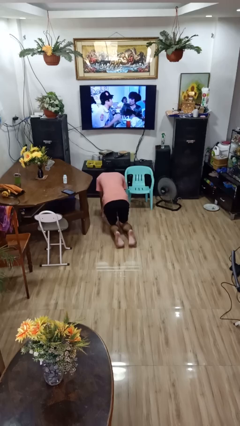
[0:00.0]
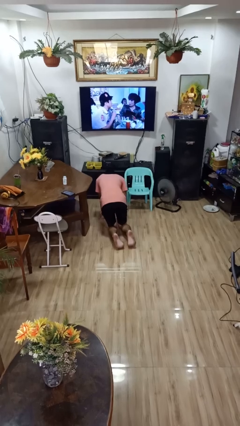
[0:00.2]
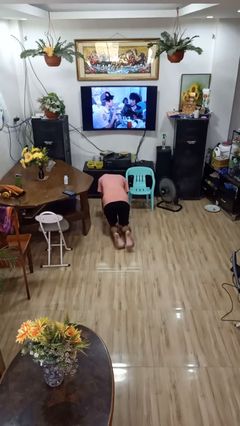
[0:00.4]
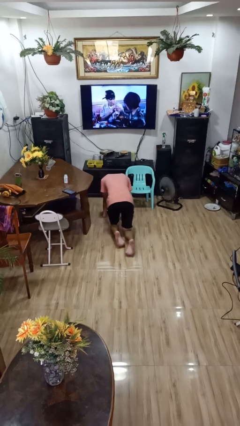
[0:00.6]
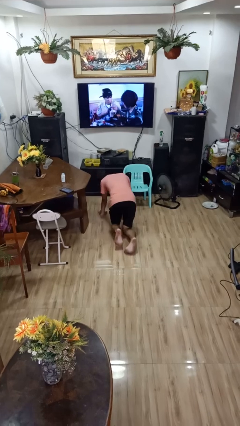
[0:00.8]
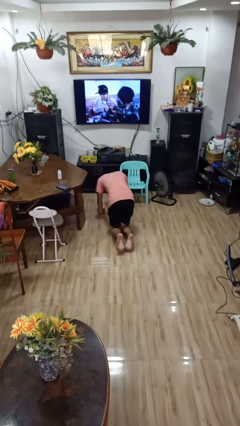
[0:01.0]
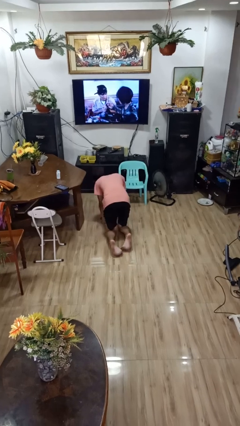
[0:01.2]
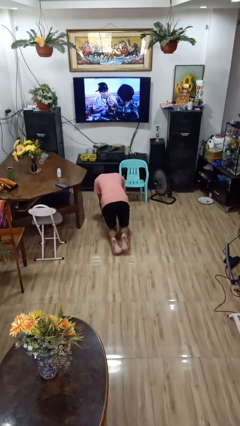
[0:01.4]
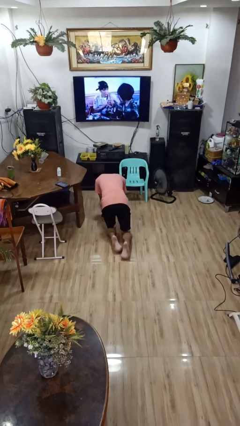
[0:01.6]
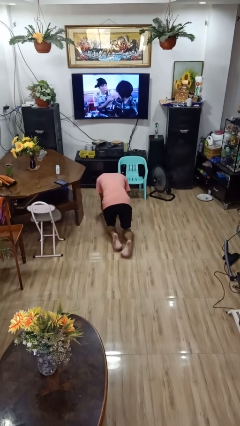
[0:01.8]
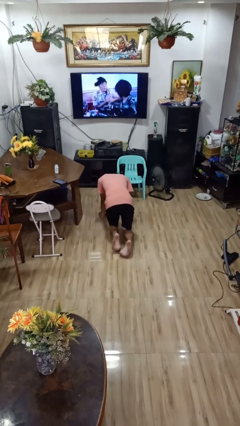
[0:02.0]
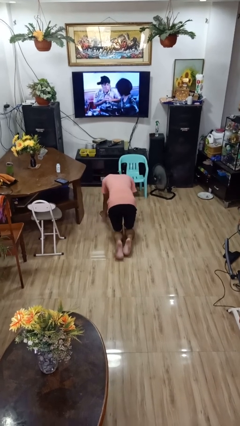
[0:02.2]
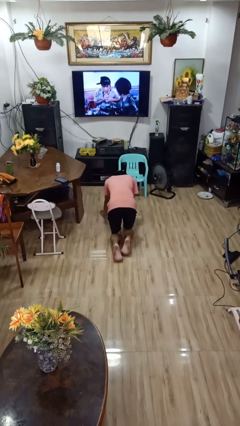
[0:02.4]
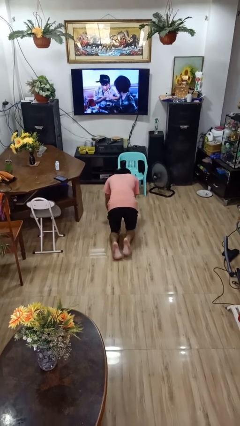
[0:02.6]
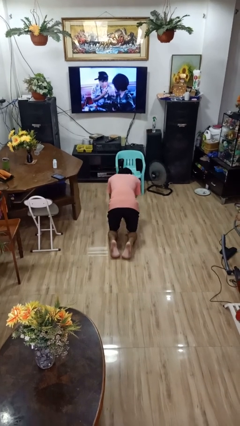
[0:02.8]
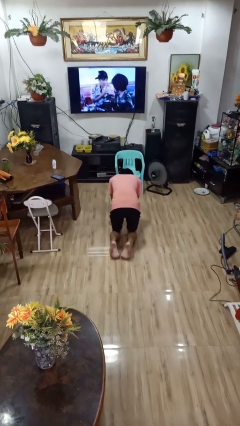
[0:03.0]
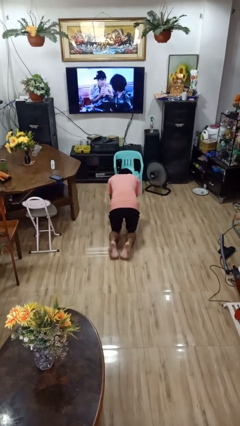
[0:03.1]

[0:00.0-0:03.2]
person crawls

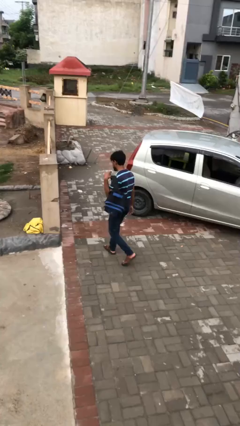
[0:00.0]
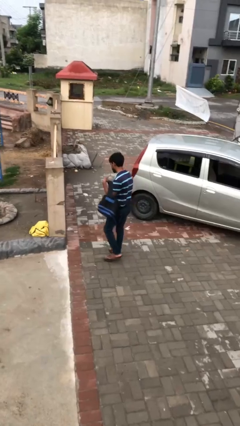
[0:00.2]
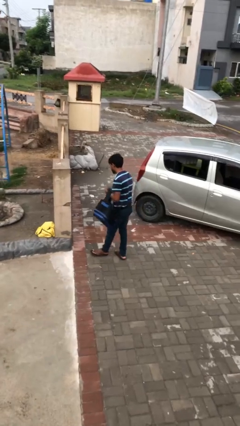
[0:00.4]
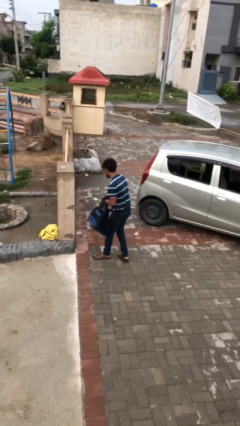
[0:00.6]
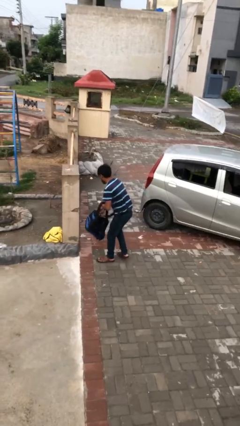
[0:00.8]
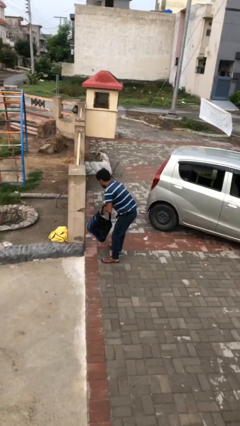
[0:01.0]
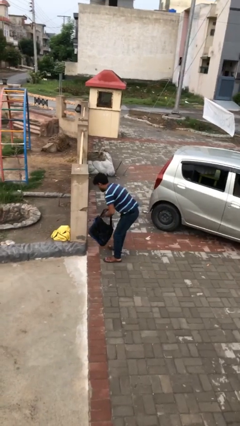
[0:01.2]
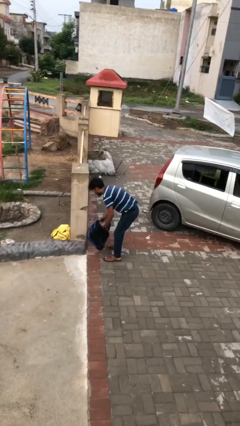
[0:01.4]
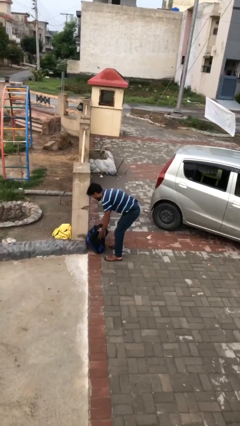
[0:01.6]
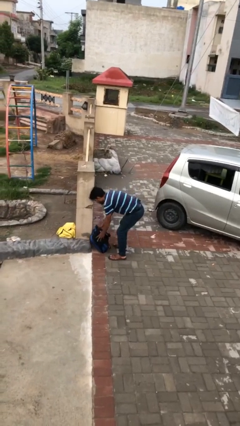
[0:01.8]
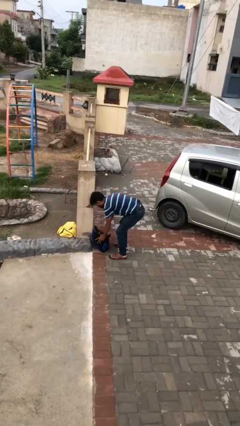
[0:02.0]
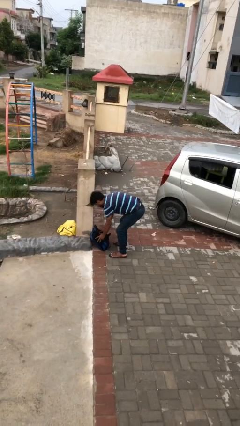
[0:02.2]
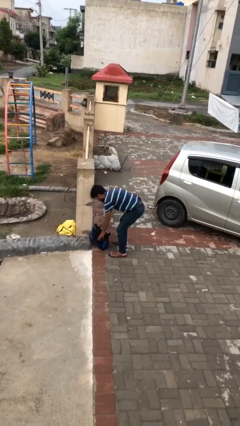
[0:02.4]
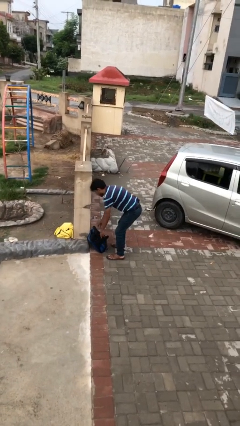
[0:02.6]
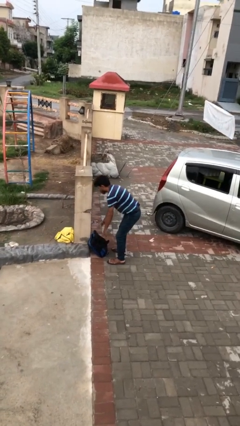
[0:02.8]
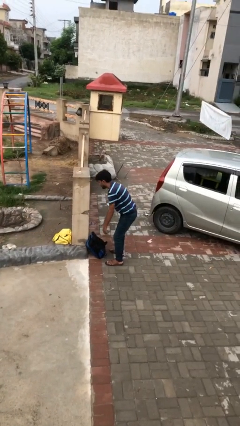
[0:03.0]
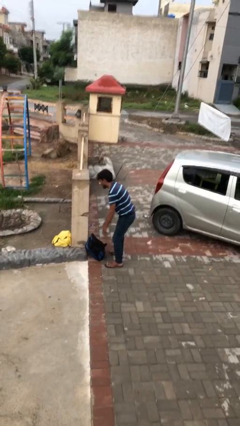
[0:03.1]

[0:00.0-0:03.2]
person puts down object on floor

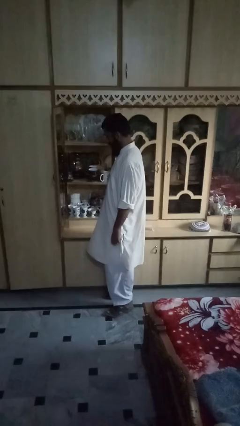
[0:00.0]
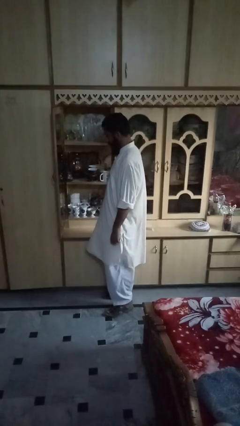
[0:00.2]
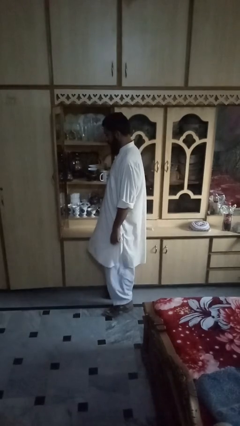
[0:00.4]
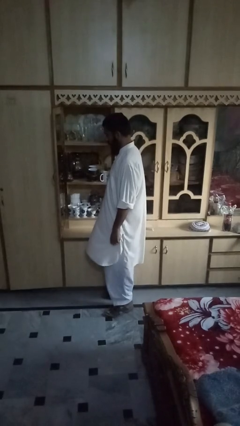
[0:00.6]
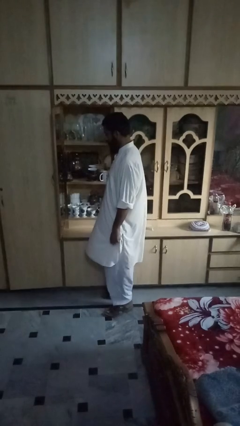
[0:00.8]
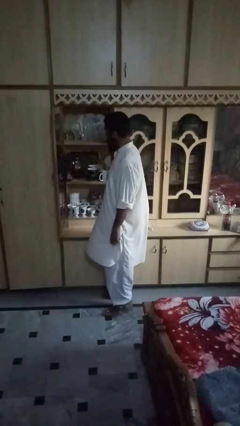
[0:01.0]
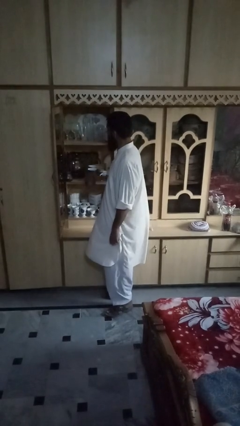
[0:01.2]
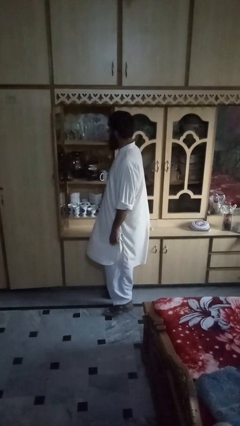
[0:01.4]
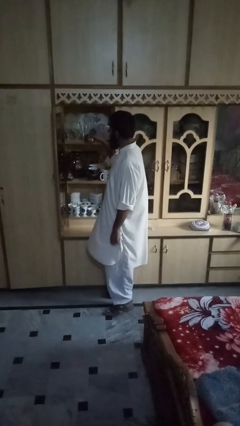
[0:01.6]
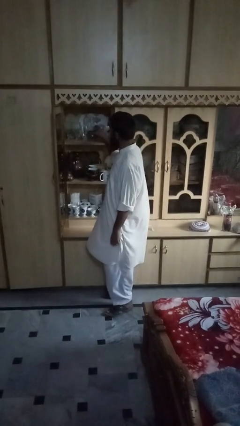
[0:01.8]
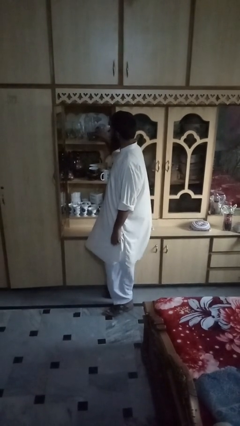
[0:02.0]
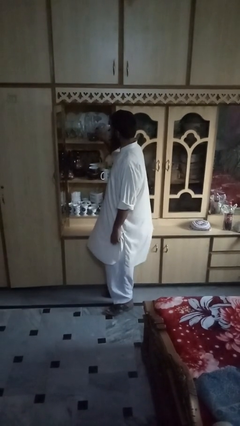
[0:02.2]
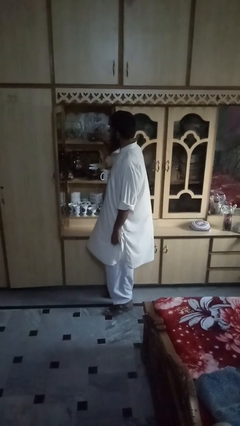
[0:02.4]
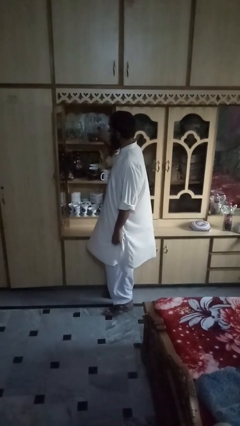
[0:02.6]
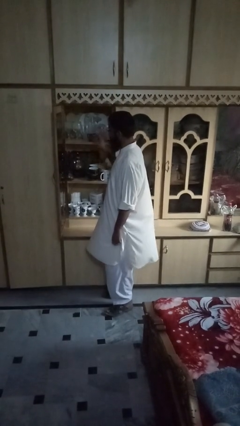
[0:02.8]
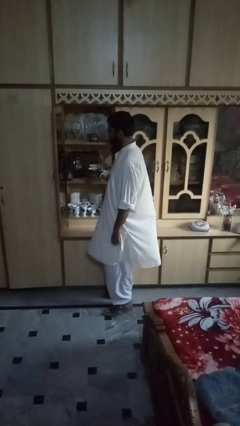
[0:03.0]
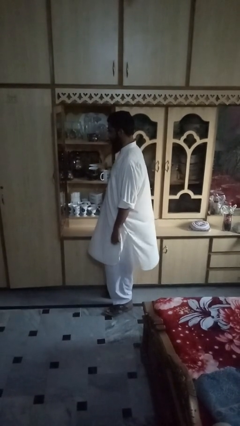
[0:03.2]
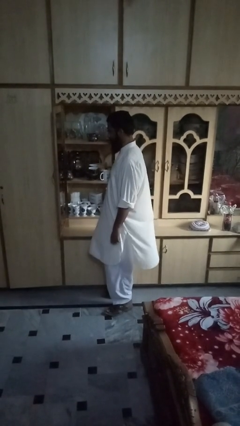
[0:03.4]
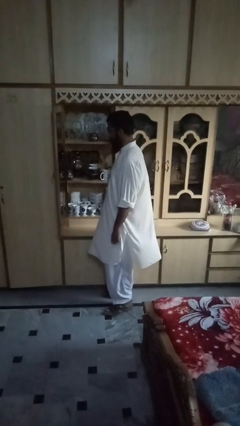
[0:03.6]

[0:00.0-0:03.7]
person puts down object on shelf

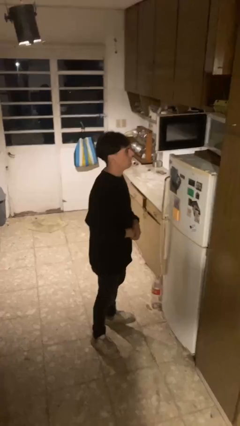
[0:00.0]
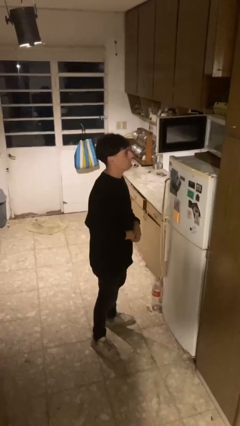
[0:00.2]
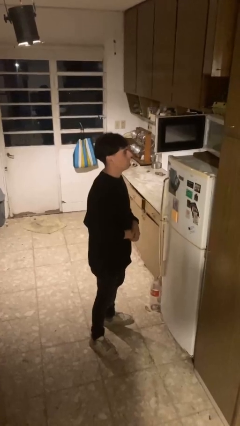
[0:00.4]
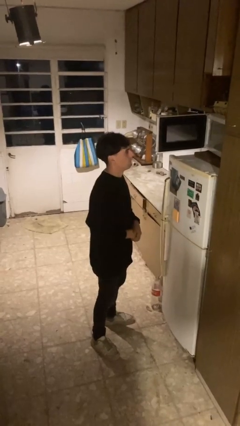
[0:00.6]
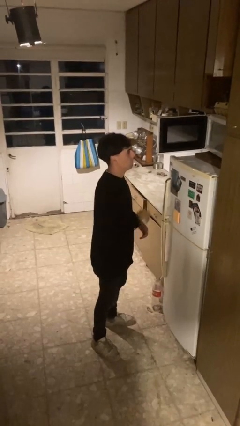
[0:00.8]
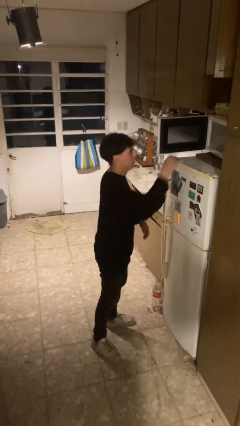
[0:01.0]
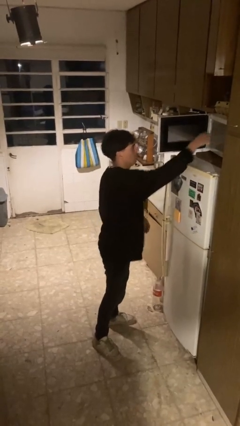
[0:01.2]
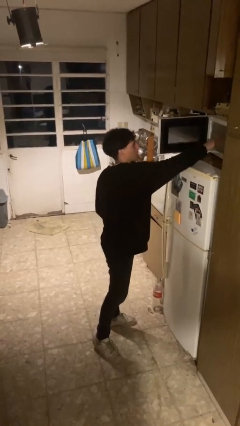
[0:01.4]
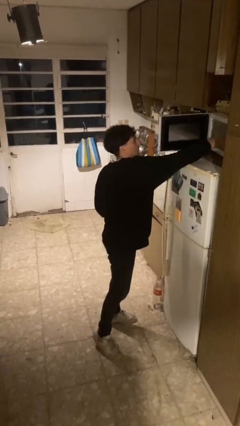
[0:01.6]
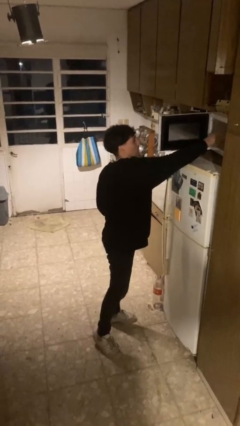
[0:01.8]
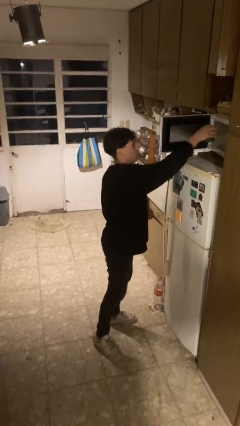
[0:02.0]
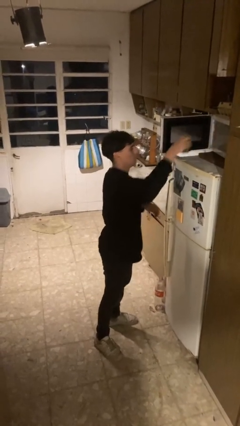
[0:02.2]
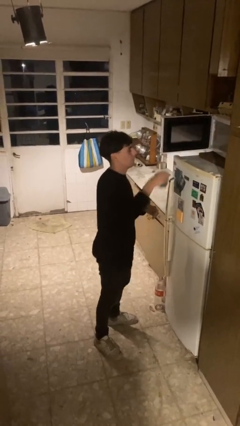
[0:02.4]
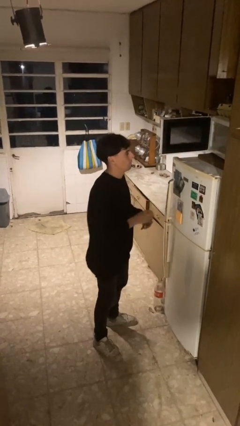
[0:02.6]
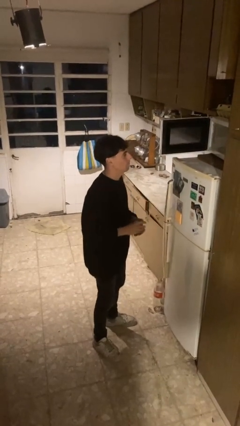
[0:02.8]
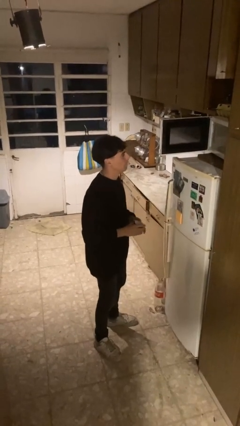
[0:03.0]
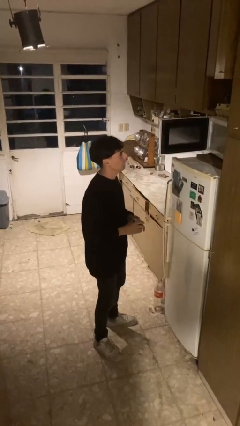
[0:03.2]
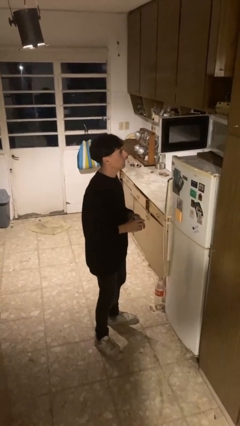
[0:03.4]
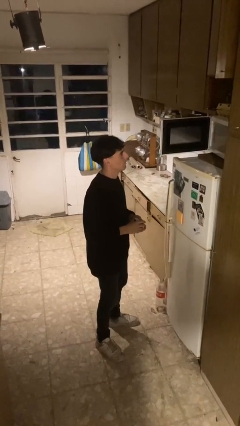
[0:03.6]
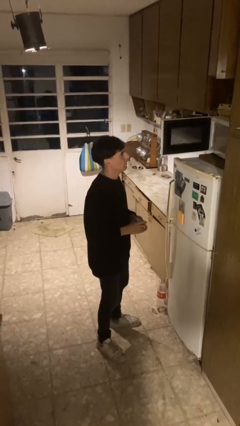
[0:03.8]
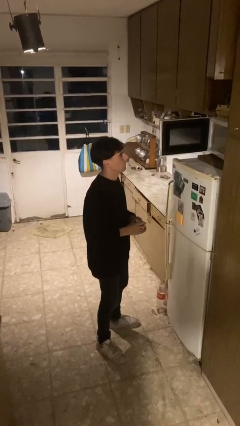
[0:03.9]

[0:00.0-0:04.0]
person takes object from microwave

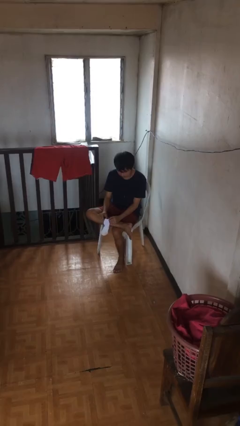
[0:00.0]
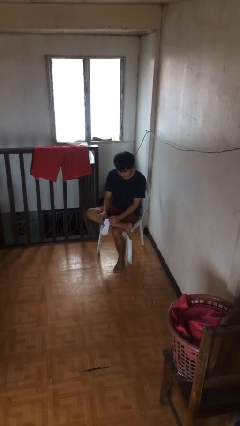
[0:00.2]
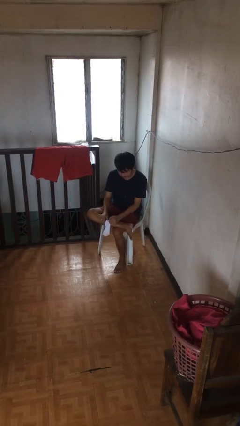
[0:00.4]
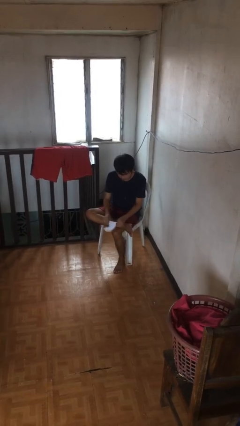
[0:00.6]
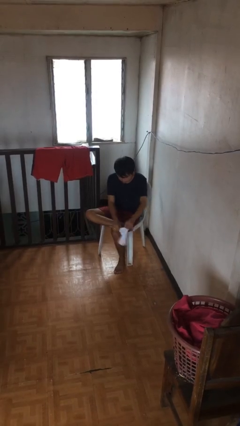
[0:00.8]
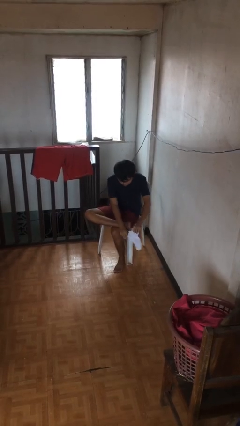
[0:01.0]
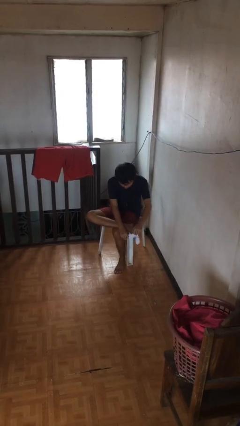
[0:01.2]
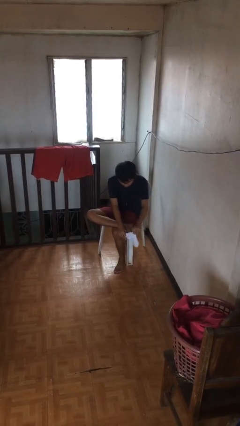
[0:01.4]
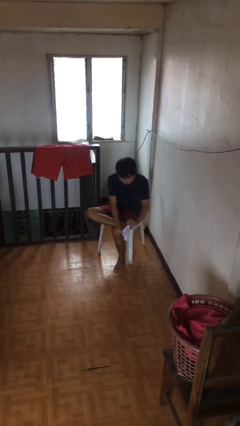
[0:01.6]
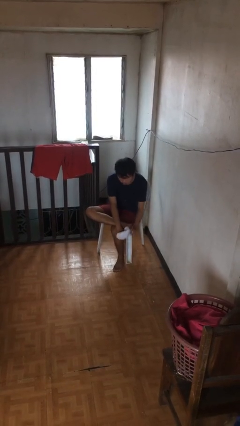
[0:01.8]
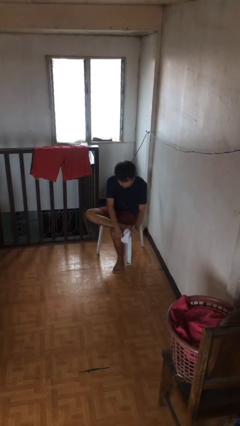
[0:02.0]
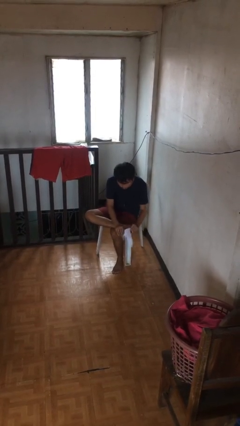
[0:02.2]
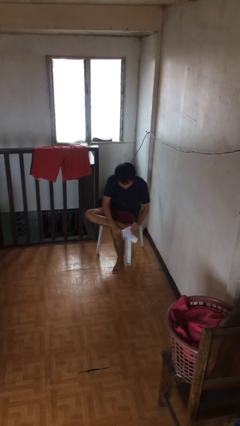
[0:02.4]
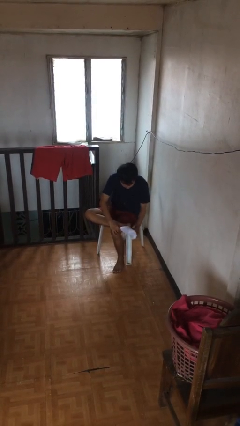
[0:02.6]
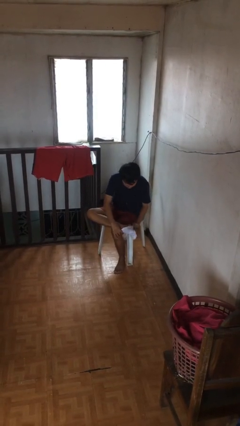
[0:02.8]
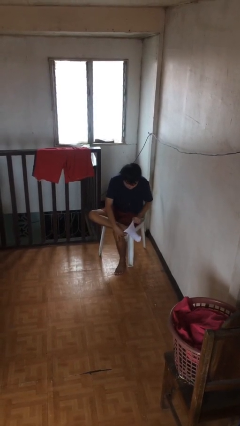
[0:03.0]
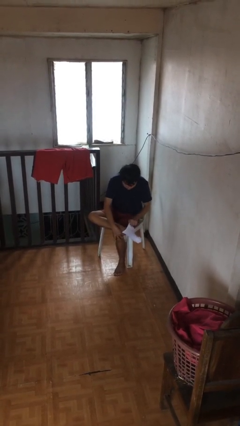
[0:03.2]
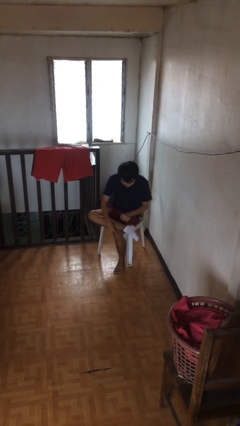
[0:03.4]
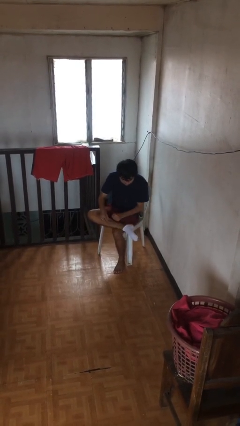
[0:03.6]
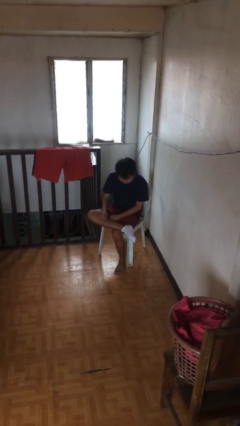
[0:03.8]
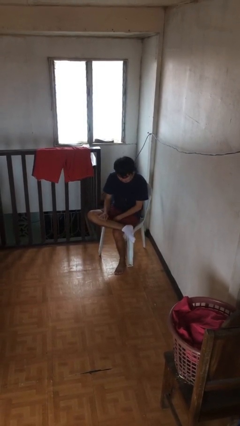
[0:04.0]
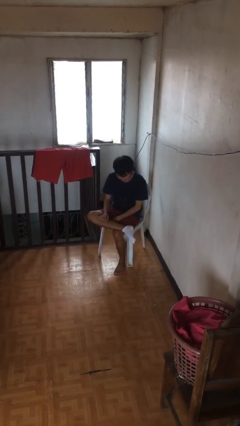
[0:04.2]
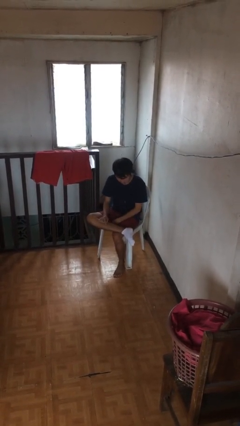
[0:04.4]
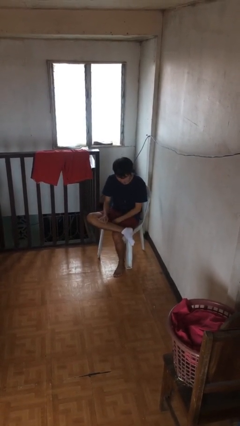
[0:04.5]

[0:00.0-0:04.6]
person puts on socks
